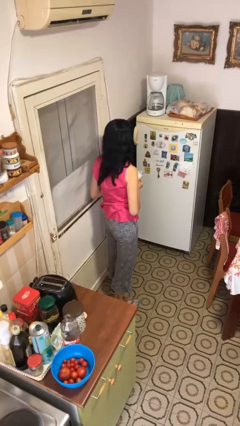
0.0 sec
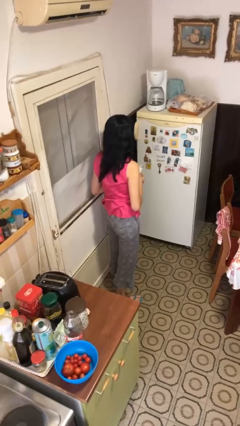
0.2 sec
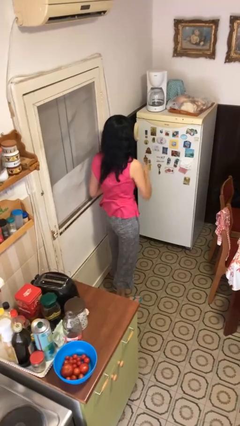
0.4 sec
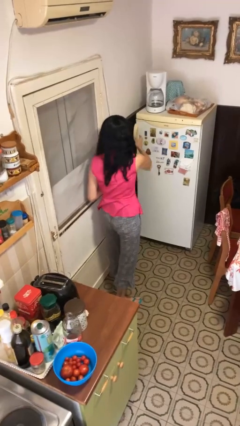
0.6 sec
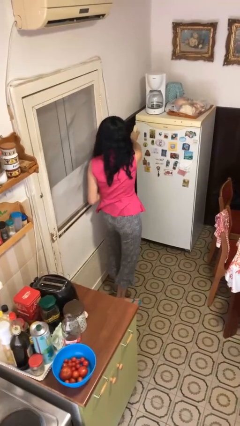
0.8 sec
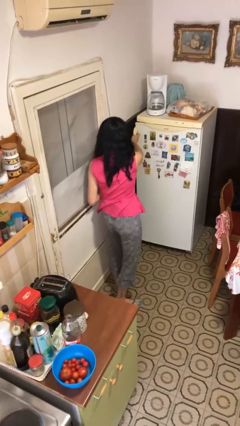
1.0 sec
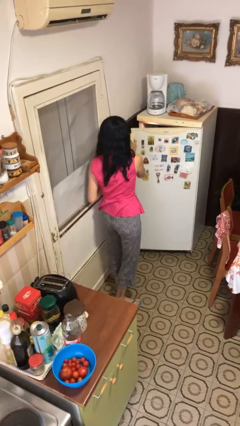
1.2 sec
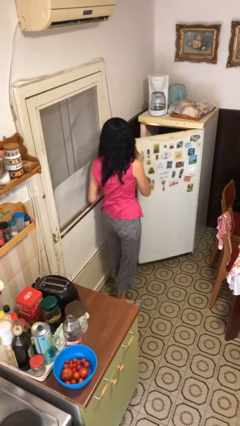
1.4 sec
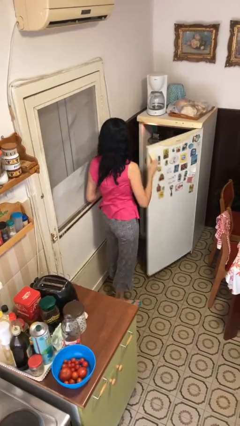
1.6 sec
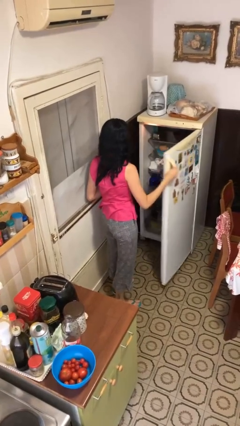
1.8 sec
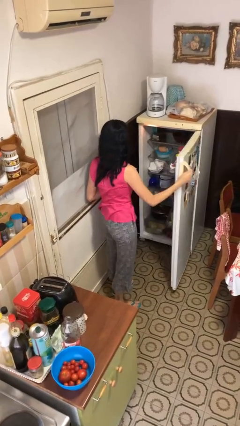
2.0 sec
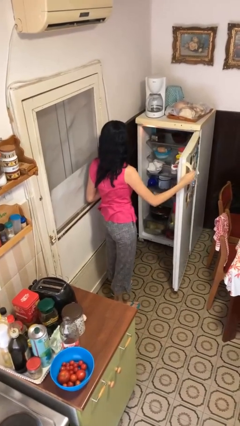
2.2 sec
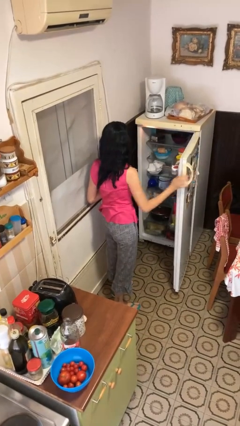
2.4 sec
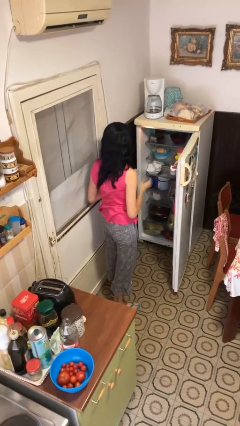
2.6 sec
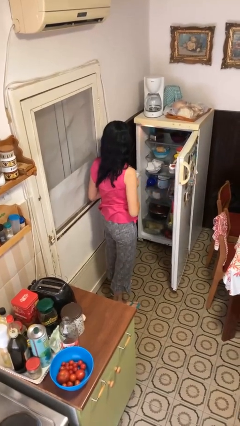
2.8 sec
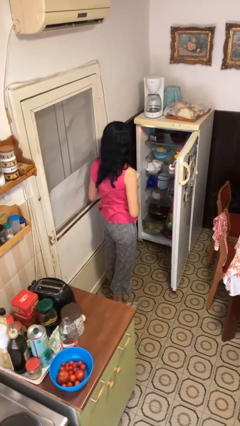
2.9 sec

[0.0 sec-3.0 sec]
person opens refrigerator

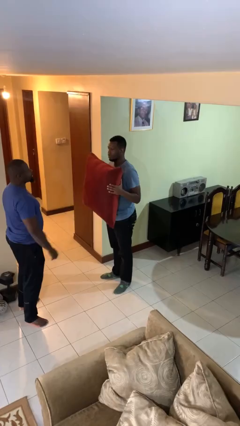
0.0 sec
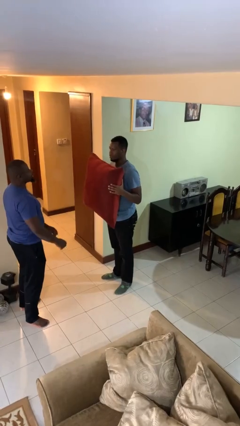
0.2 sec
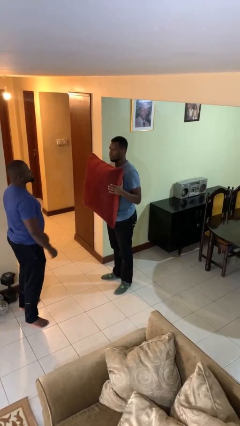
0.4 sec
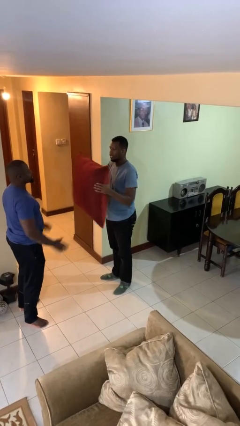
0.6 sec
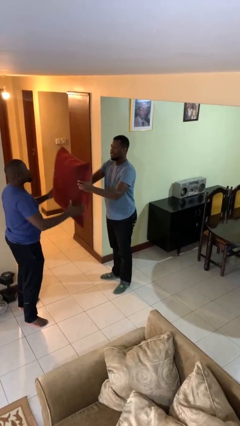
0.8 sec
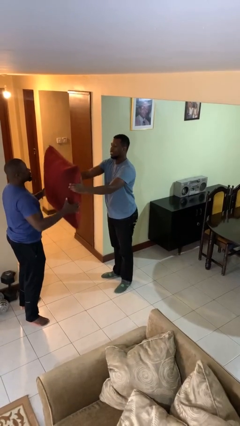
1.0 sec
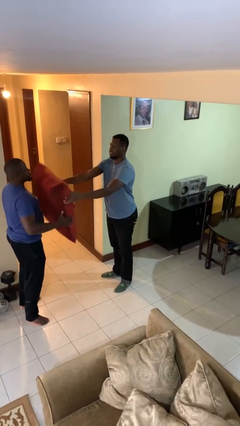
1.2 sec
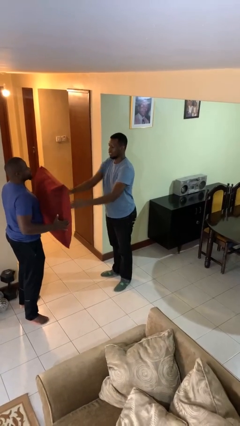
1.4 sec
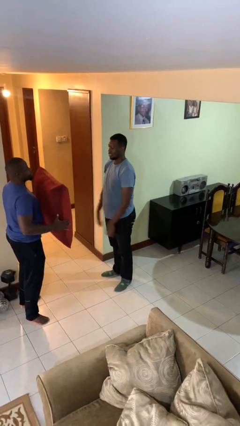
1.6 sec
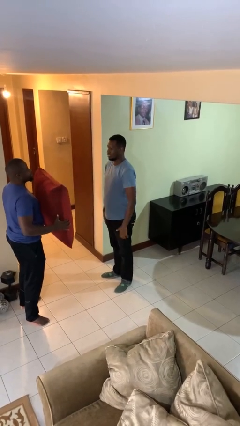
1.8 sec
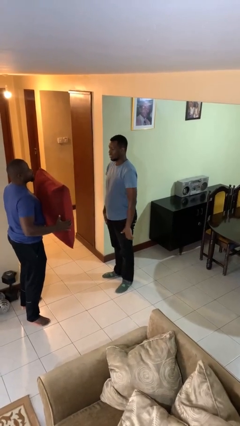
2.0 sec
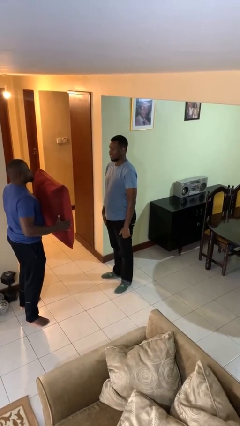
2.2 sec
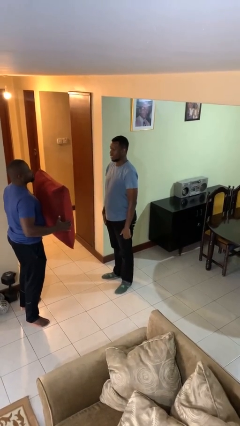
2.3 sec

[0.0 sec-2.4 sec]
person transfers object to person

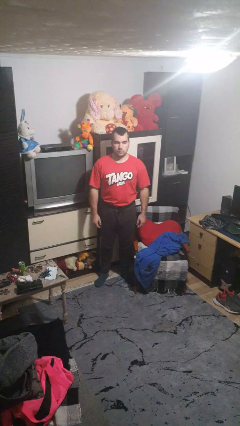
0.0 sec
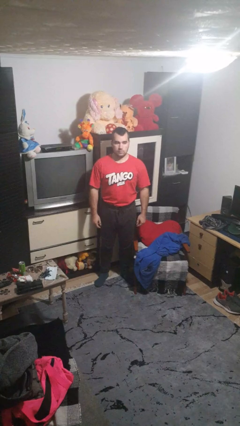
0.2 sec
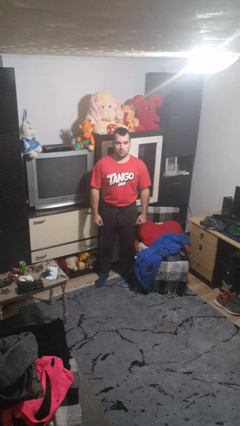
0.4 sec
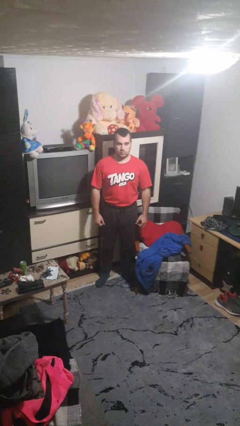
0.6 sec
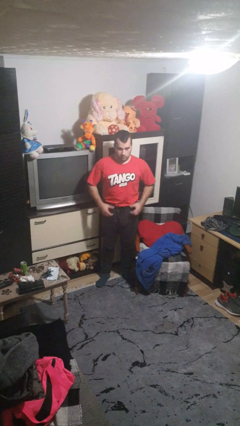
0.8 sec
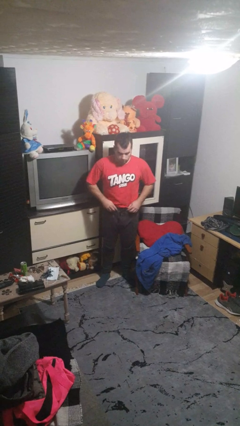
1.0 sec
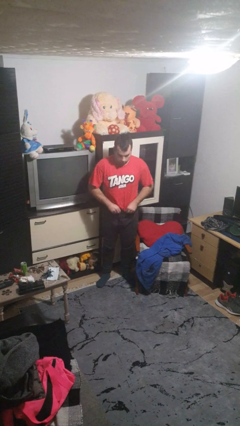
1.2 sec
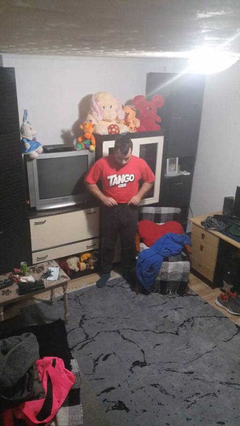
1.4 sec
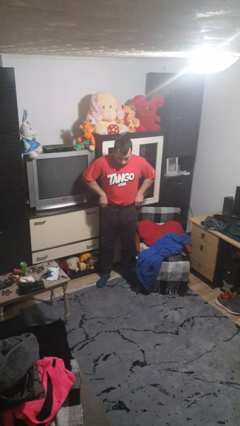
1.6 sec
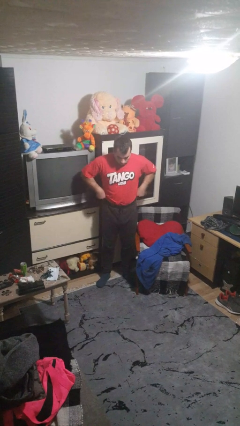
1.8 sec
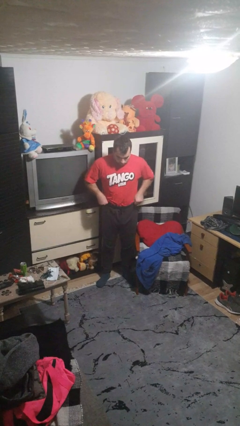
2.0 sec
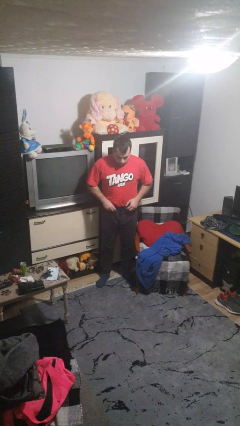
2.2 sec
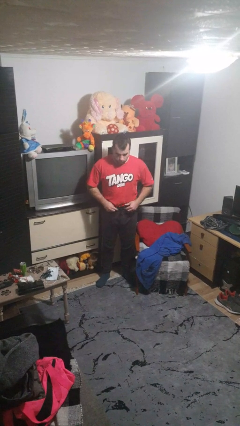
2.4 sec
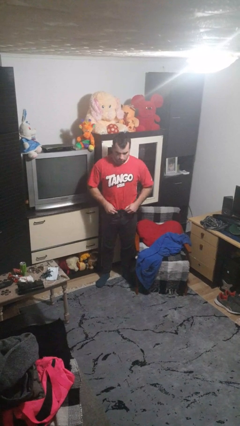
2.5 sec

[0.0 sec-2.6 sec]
person hikes up pants

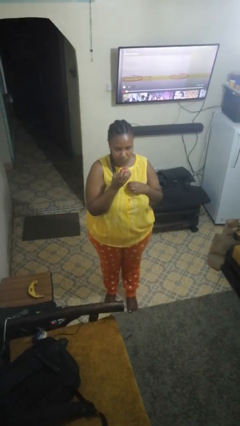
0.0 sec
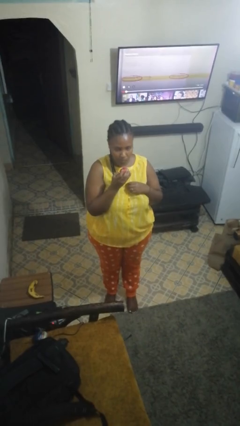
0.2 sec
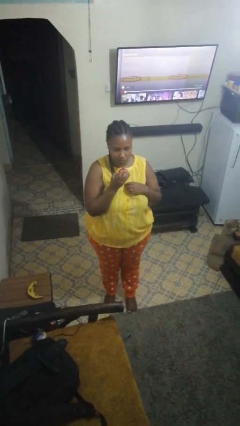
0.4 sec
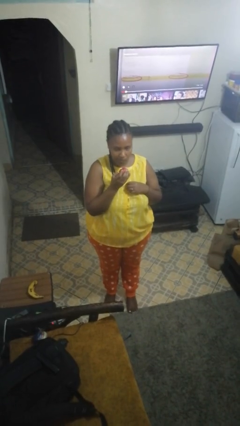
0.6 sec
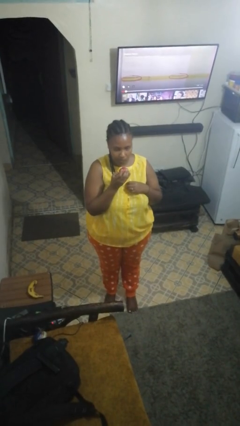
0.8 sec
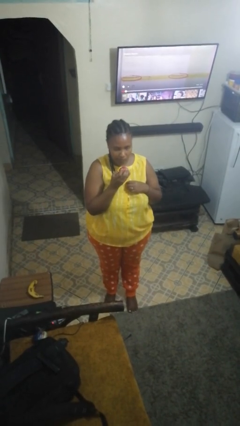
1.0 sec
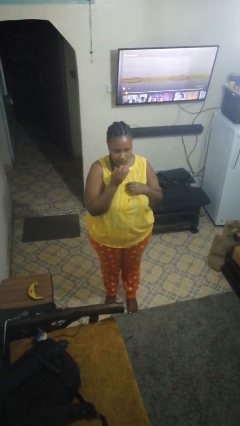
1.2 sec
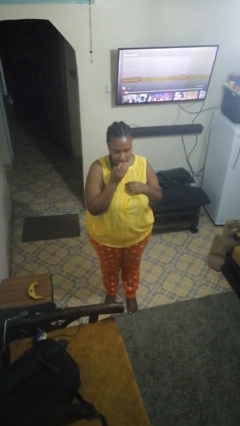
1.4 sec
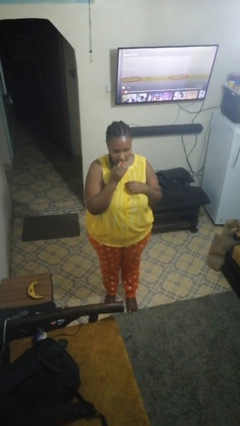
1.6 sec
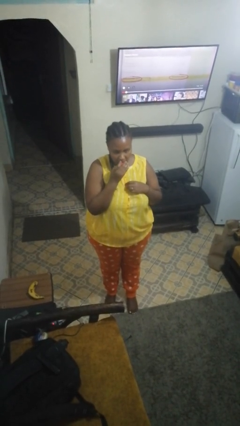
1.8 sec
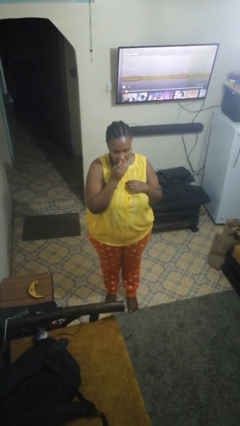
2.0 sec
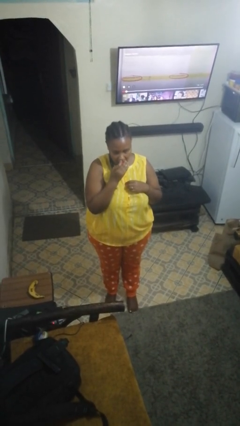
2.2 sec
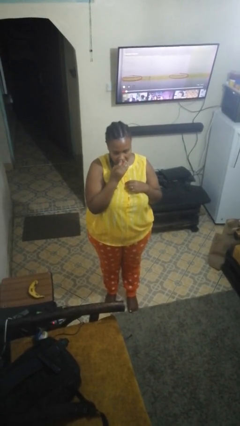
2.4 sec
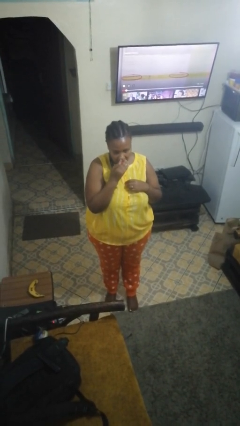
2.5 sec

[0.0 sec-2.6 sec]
person eats apple

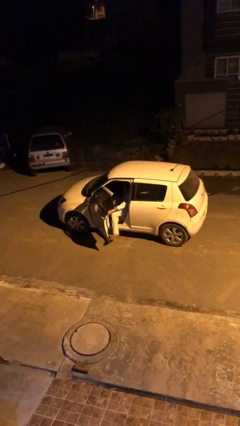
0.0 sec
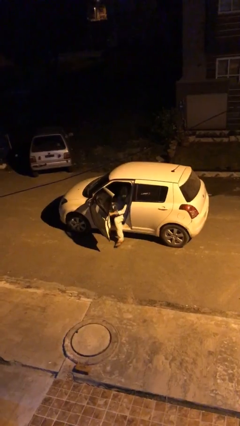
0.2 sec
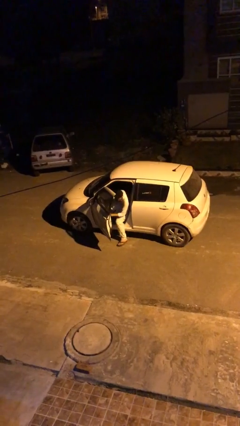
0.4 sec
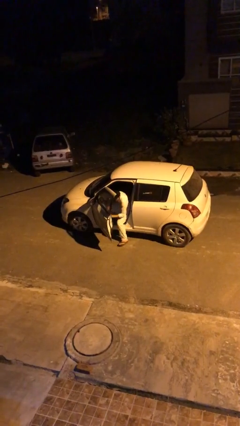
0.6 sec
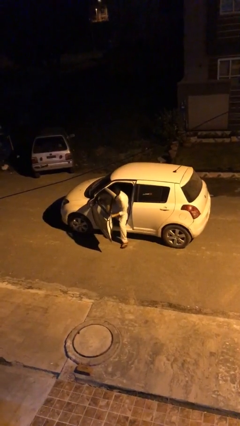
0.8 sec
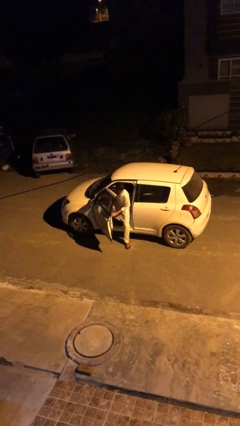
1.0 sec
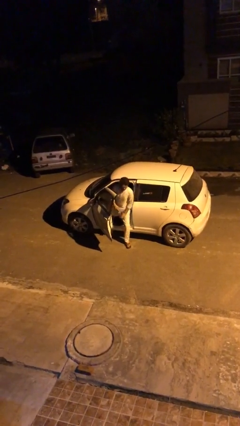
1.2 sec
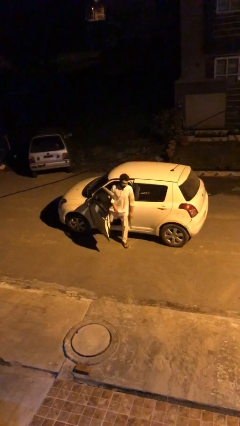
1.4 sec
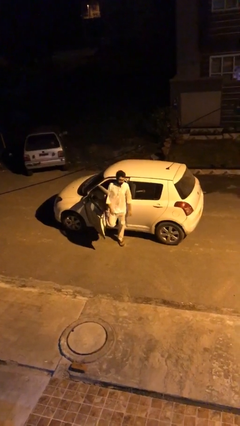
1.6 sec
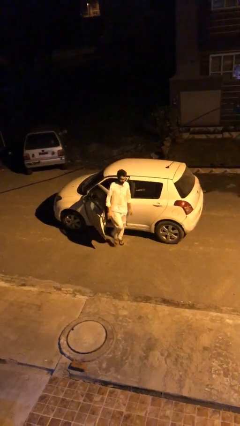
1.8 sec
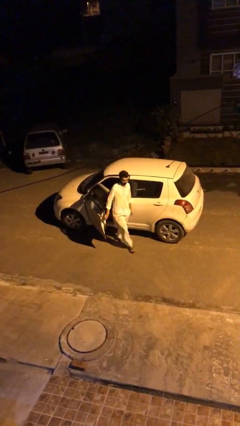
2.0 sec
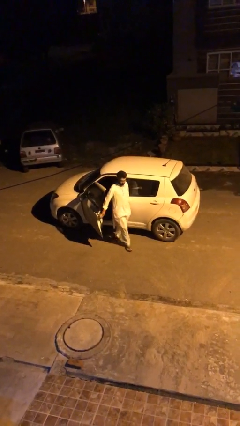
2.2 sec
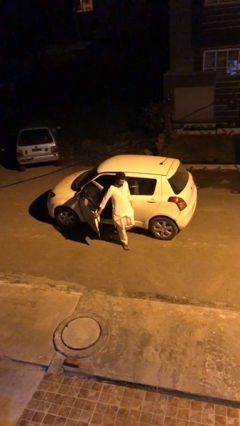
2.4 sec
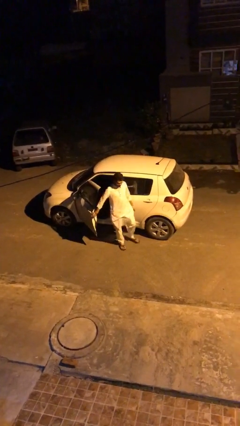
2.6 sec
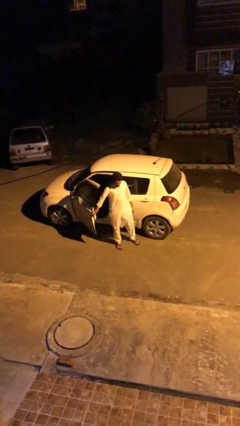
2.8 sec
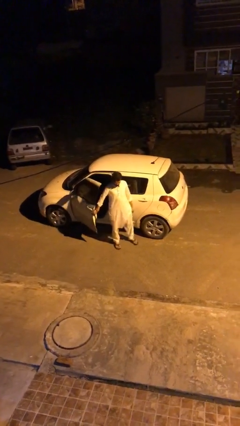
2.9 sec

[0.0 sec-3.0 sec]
person exits car

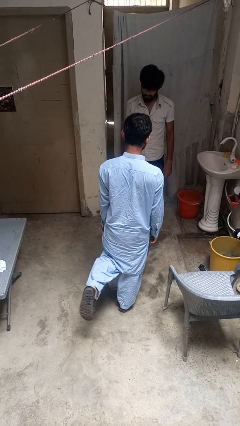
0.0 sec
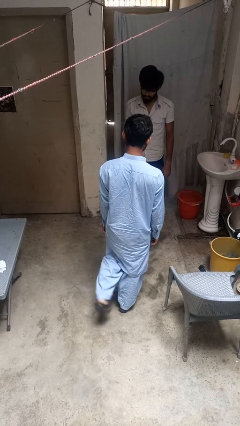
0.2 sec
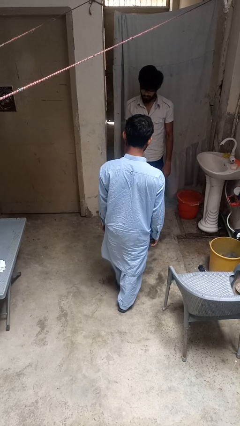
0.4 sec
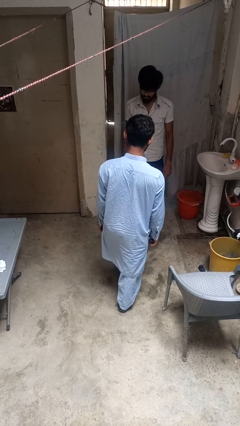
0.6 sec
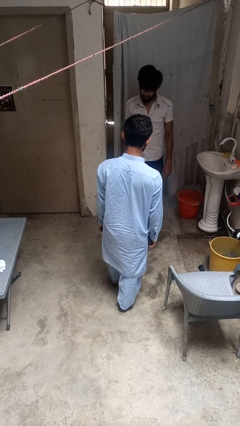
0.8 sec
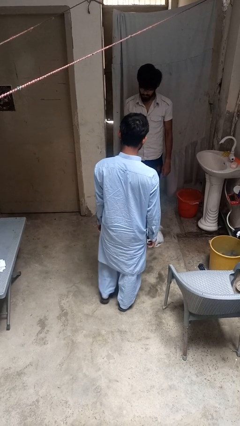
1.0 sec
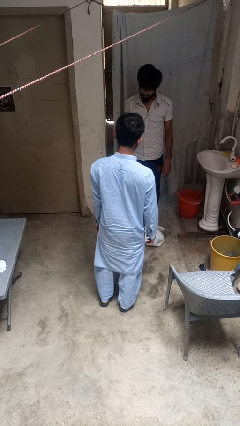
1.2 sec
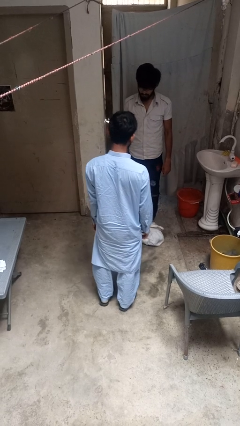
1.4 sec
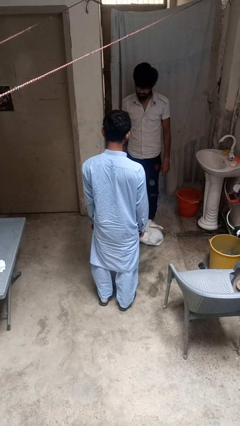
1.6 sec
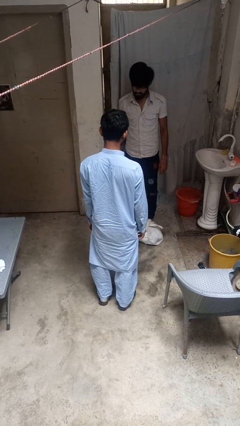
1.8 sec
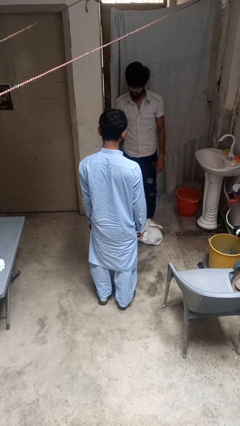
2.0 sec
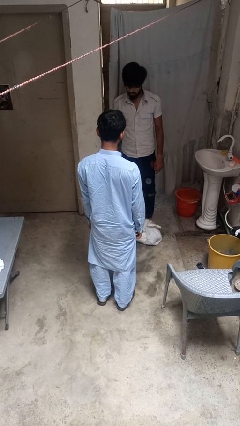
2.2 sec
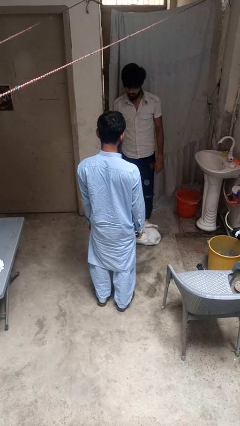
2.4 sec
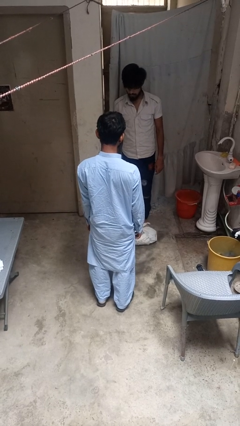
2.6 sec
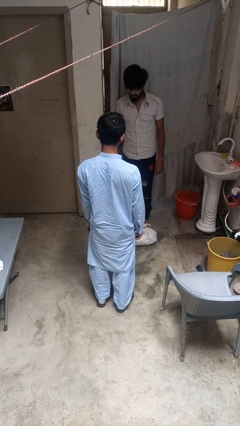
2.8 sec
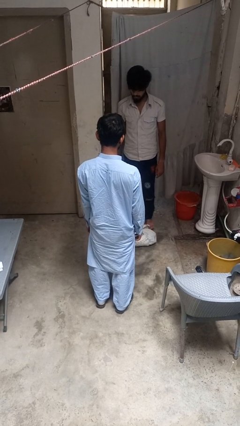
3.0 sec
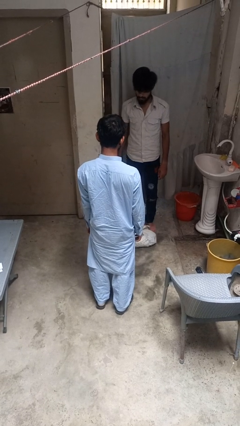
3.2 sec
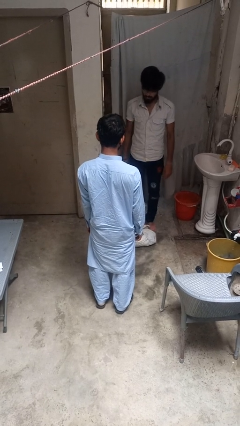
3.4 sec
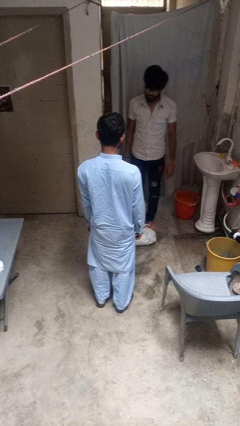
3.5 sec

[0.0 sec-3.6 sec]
person kicks object to person

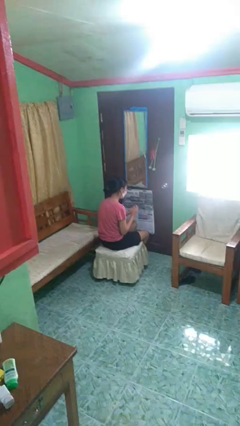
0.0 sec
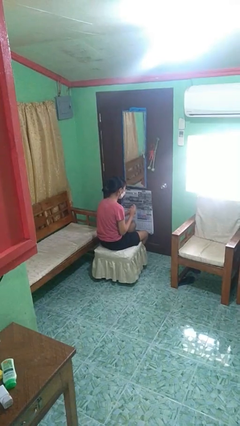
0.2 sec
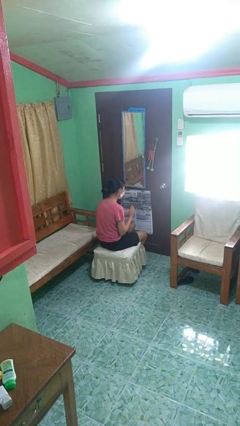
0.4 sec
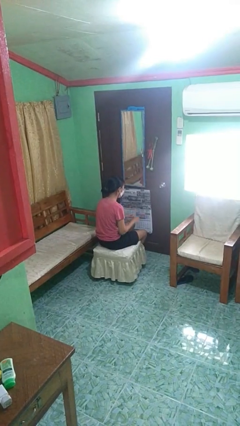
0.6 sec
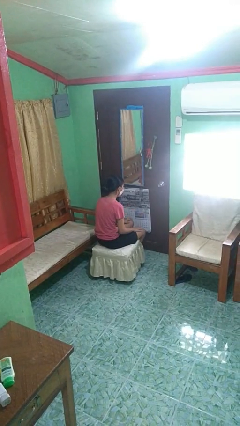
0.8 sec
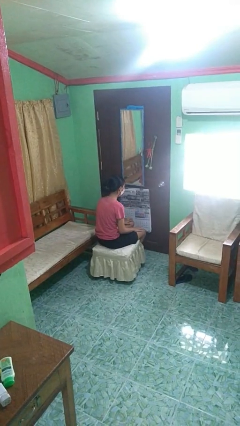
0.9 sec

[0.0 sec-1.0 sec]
person puts on ring
